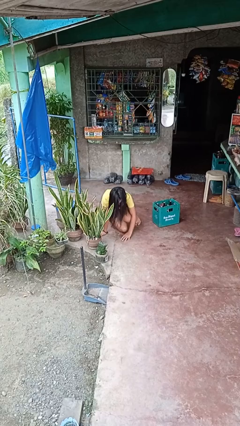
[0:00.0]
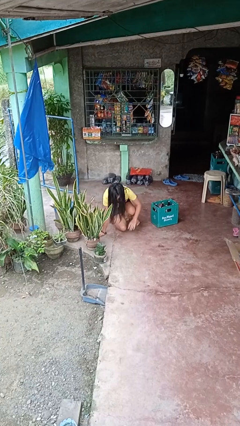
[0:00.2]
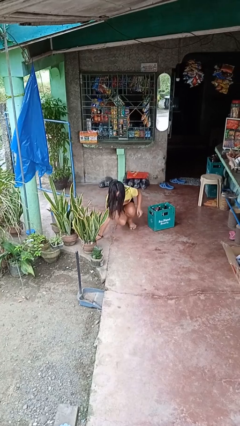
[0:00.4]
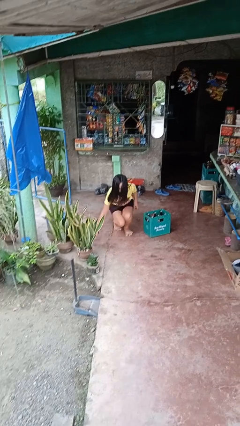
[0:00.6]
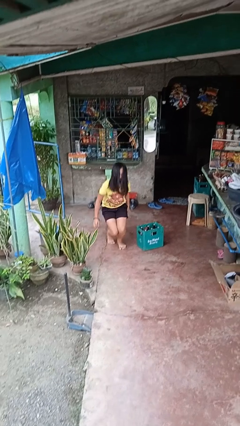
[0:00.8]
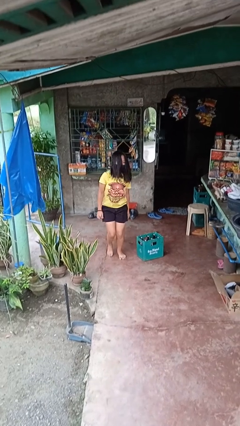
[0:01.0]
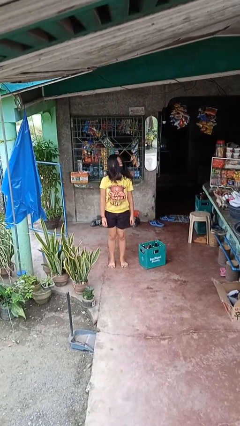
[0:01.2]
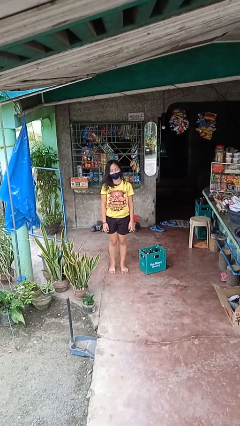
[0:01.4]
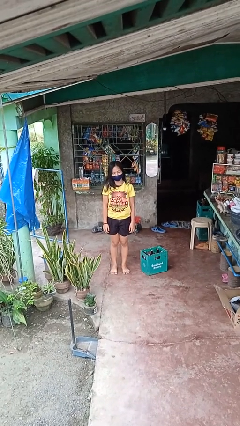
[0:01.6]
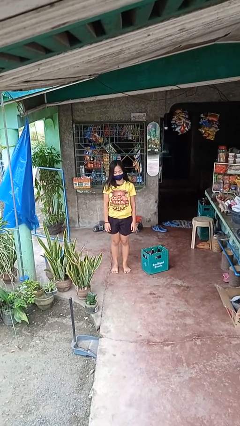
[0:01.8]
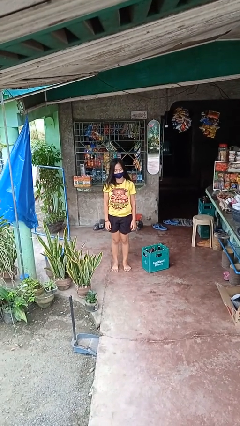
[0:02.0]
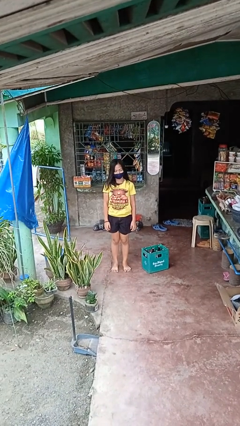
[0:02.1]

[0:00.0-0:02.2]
person stands up from floor

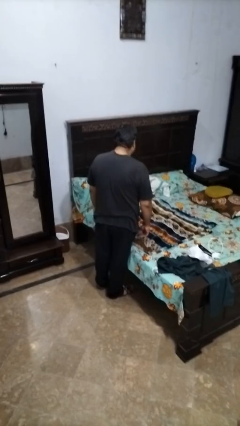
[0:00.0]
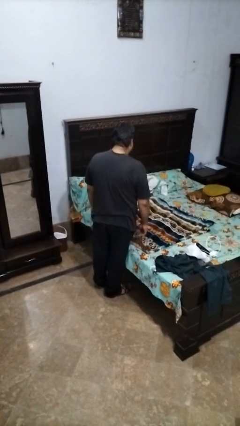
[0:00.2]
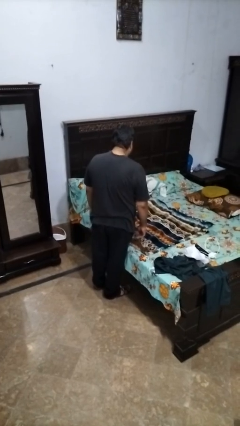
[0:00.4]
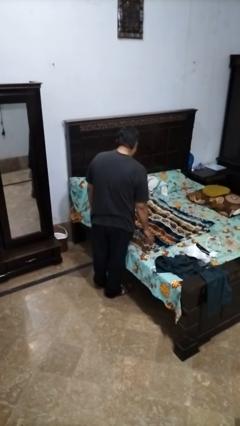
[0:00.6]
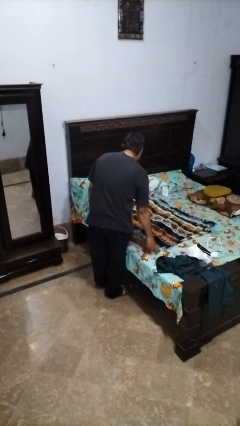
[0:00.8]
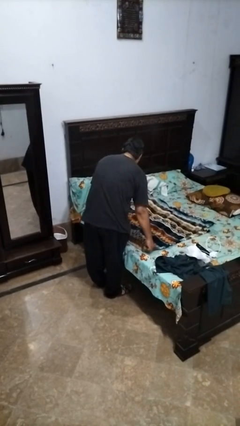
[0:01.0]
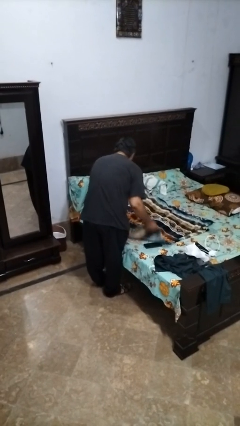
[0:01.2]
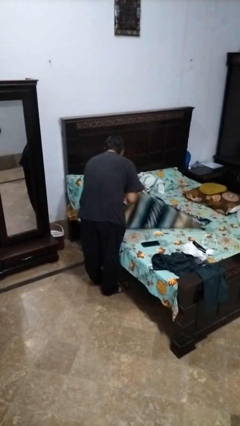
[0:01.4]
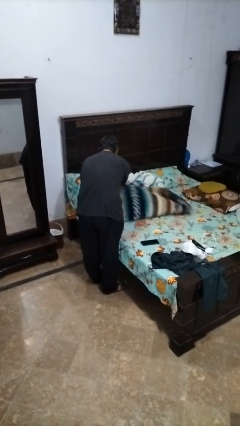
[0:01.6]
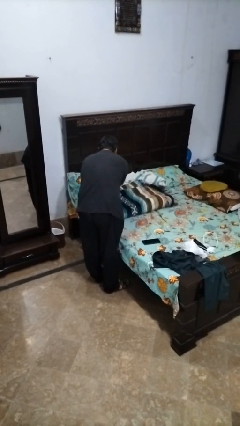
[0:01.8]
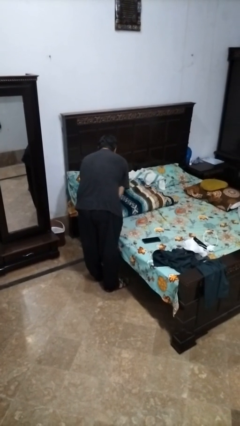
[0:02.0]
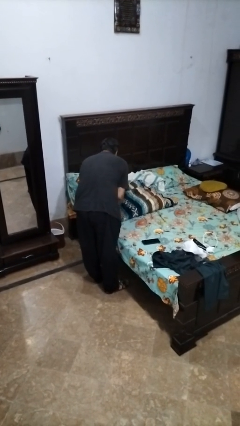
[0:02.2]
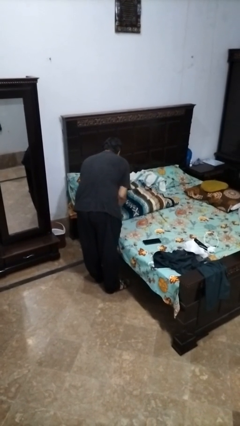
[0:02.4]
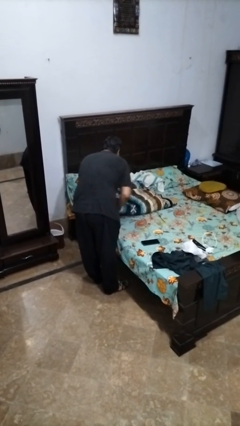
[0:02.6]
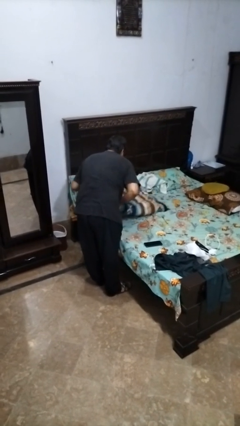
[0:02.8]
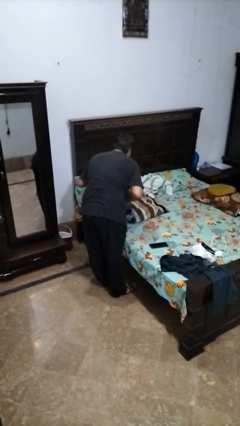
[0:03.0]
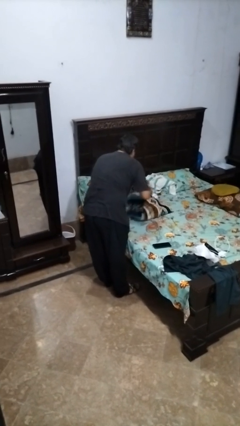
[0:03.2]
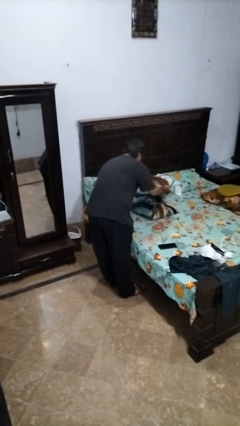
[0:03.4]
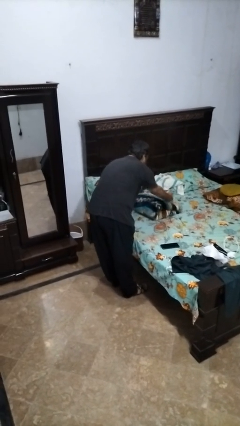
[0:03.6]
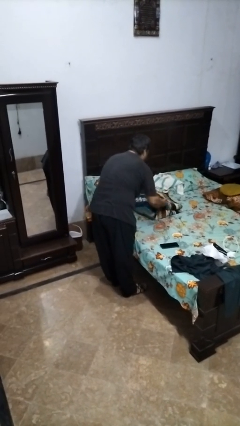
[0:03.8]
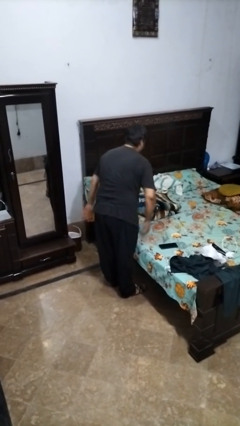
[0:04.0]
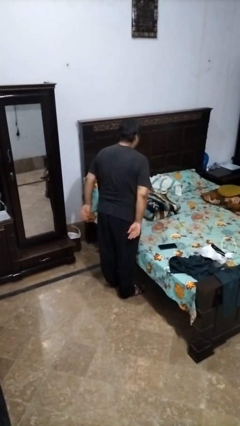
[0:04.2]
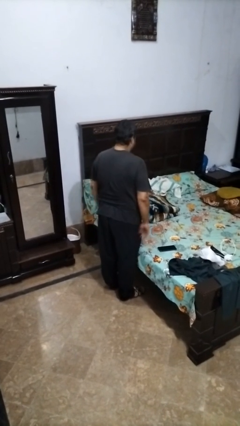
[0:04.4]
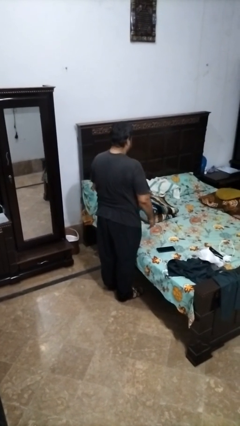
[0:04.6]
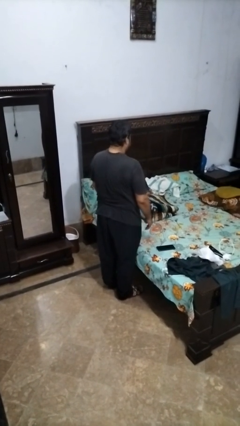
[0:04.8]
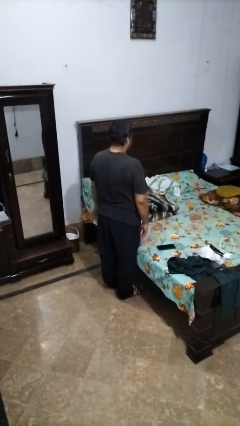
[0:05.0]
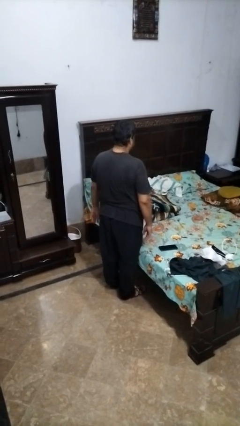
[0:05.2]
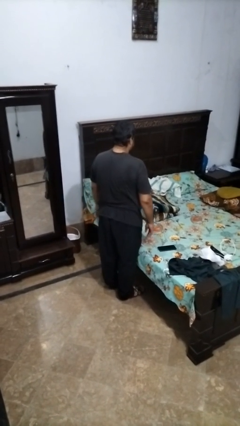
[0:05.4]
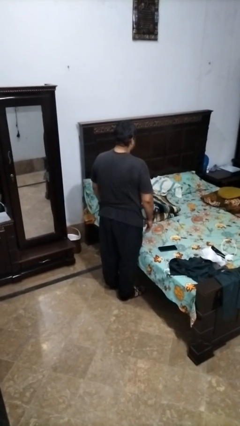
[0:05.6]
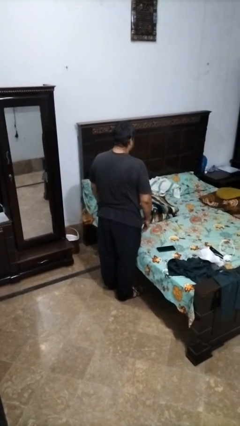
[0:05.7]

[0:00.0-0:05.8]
person folds blanket

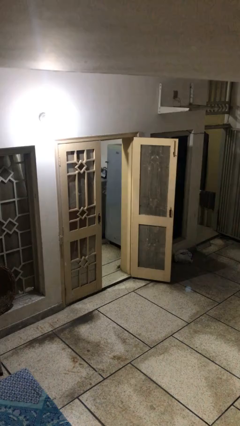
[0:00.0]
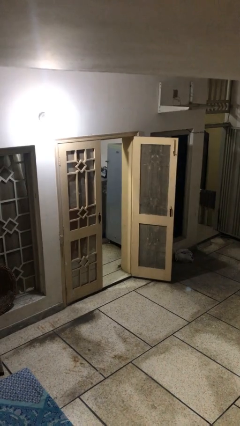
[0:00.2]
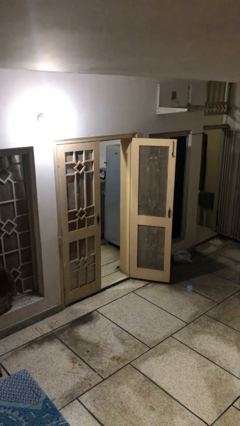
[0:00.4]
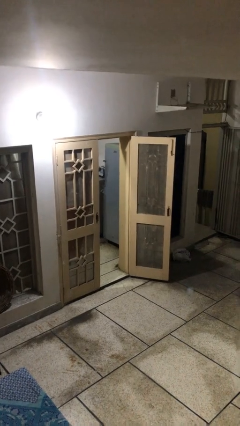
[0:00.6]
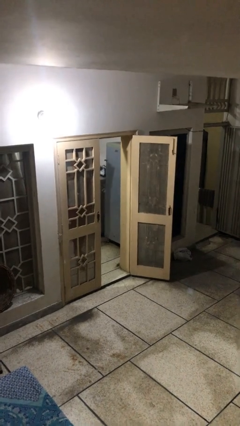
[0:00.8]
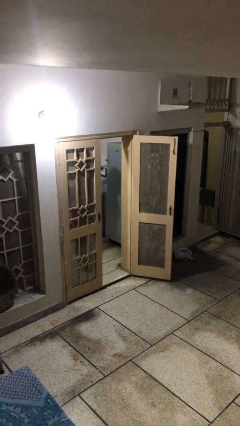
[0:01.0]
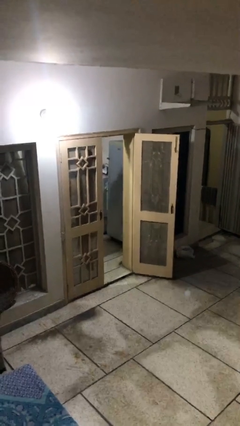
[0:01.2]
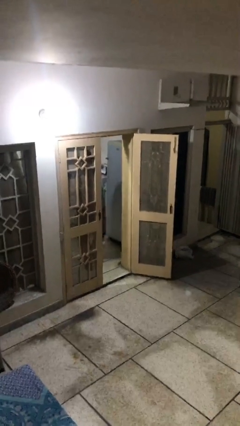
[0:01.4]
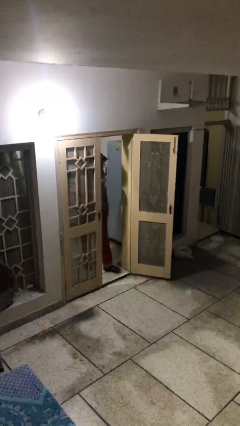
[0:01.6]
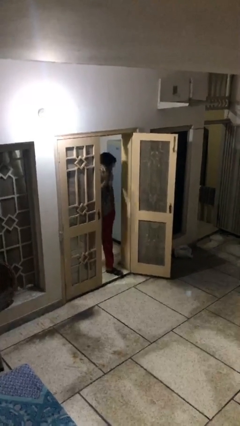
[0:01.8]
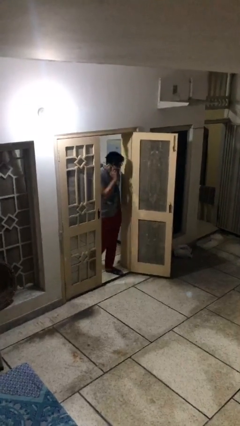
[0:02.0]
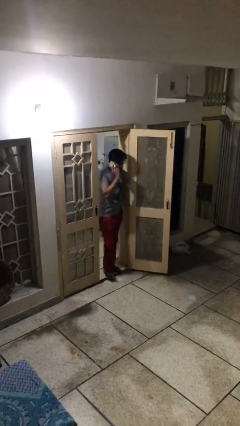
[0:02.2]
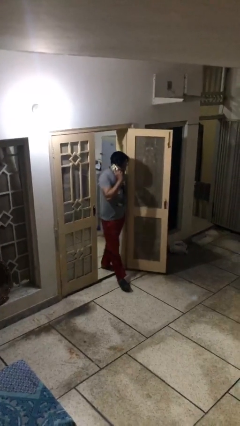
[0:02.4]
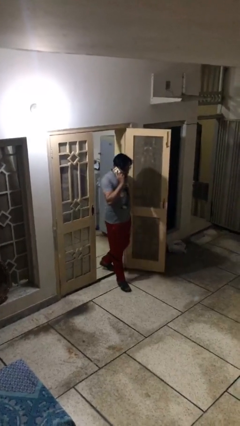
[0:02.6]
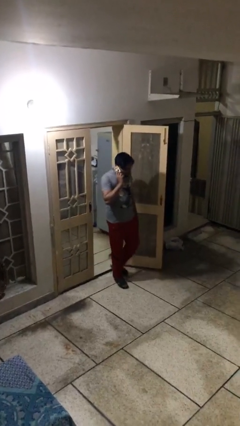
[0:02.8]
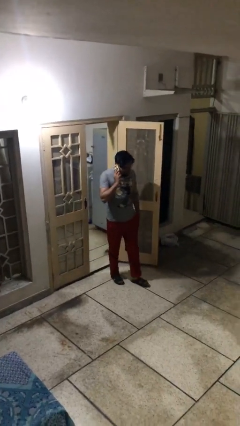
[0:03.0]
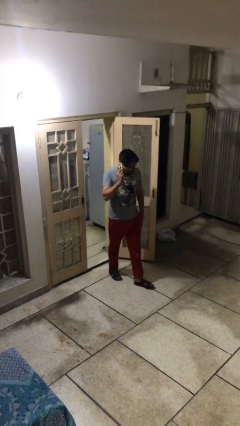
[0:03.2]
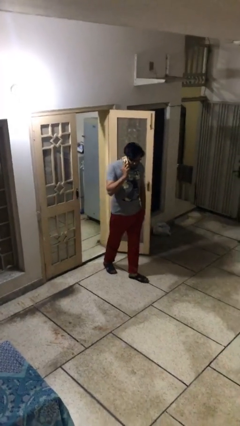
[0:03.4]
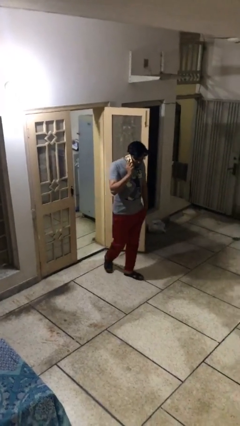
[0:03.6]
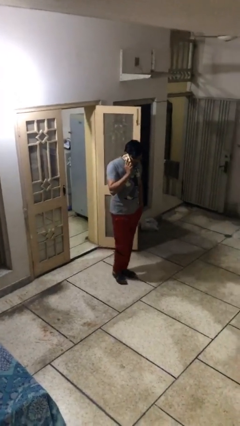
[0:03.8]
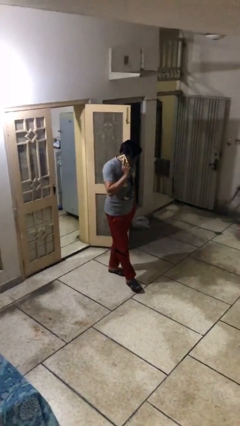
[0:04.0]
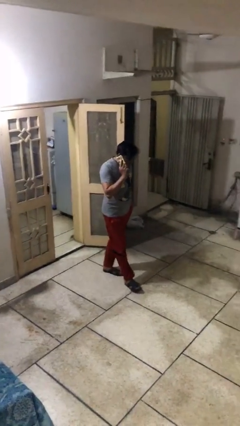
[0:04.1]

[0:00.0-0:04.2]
person enters scene through structure

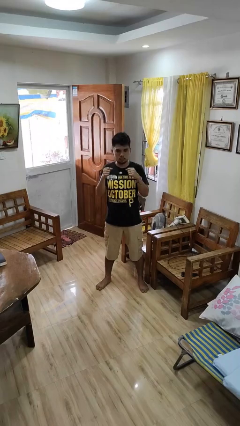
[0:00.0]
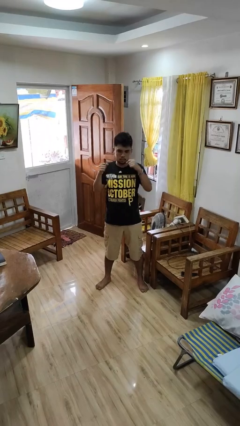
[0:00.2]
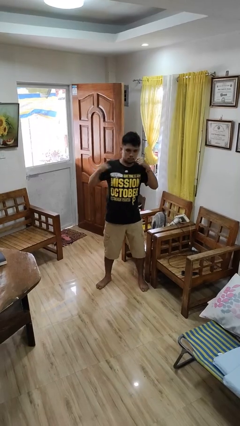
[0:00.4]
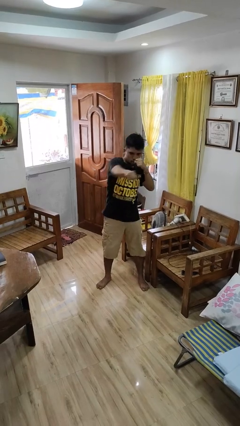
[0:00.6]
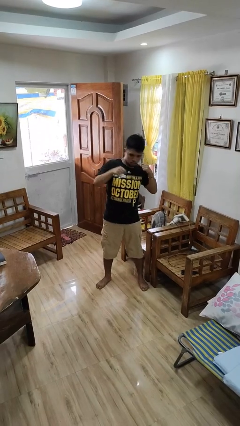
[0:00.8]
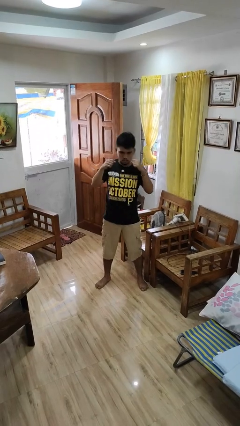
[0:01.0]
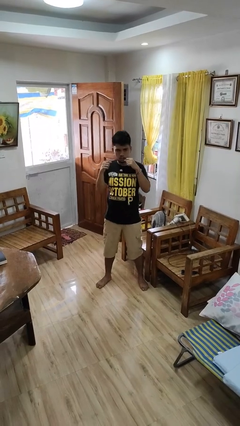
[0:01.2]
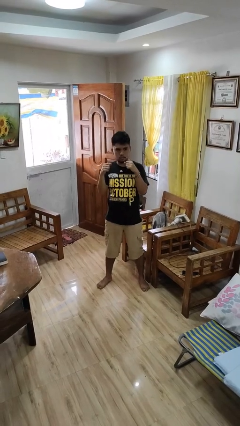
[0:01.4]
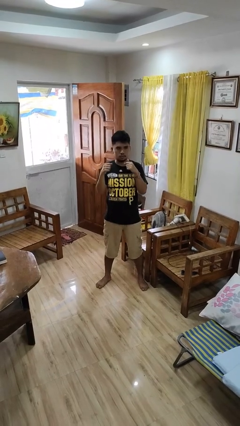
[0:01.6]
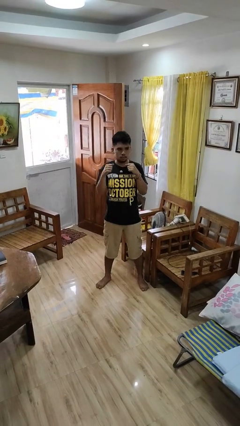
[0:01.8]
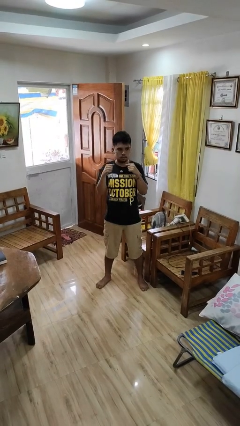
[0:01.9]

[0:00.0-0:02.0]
person punches

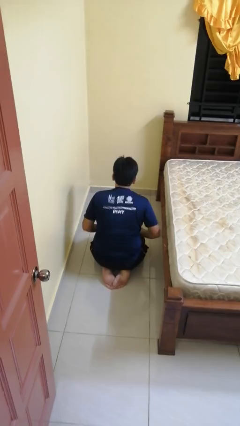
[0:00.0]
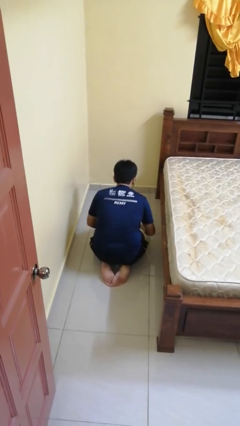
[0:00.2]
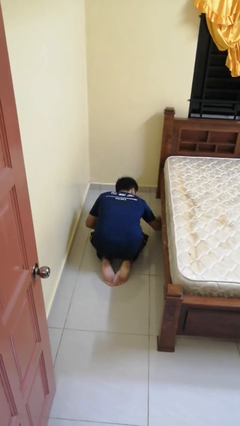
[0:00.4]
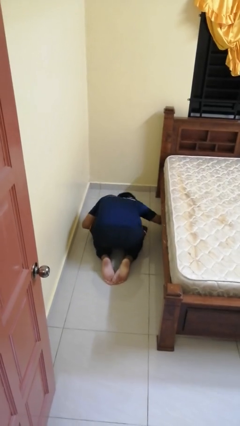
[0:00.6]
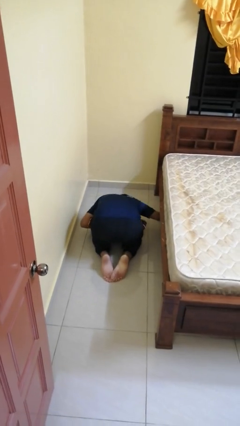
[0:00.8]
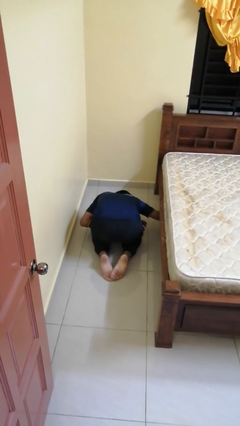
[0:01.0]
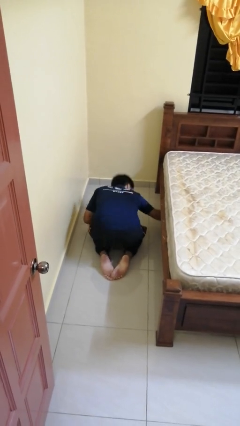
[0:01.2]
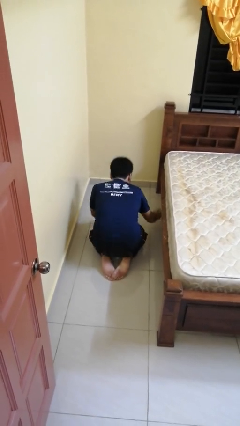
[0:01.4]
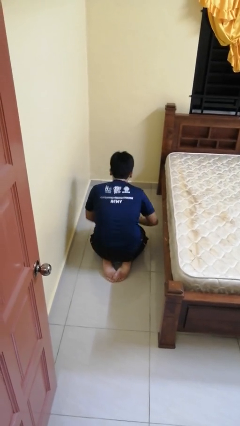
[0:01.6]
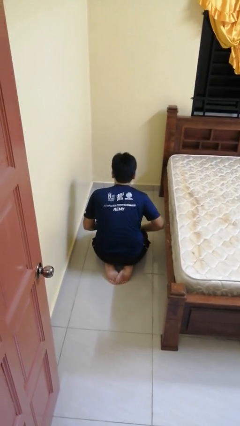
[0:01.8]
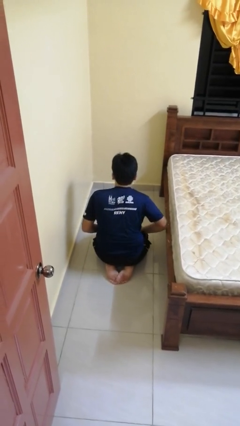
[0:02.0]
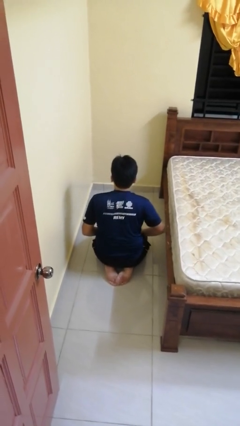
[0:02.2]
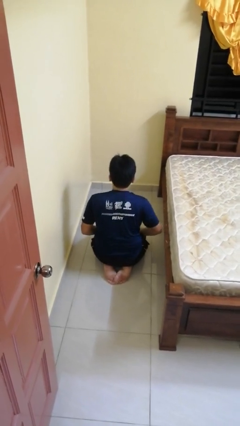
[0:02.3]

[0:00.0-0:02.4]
person searches under bed

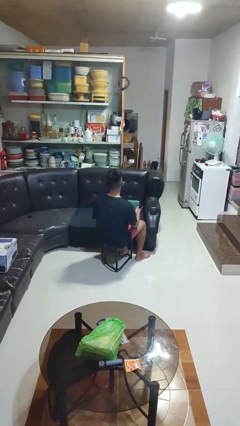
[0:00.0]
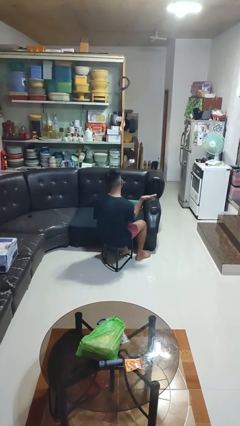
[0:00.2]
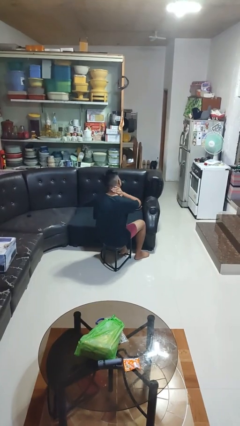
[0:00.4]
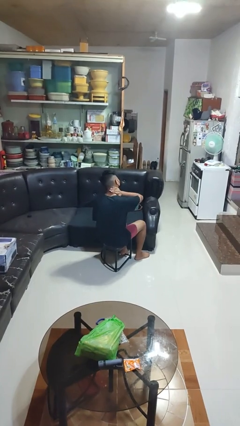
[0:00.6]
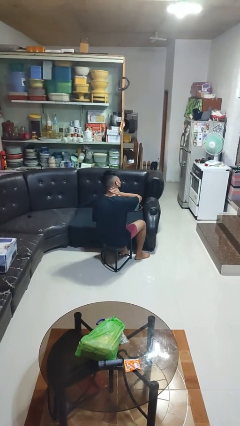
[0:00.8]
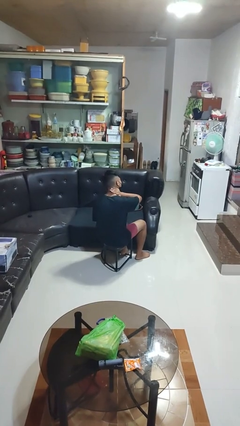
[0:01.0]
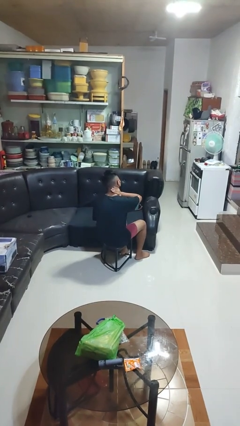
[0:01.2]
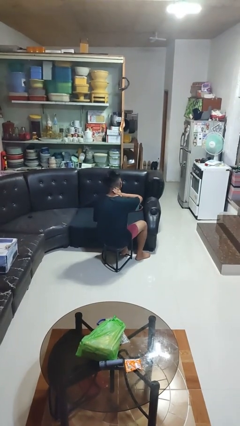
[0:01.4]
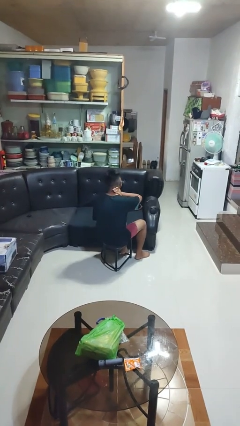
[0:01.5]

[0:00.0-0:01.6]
person swats bug
